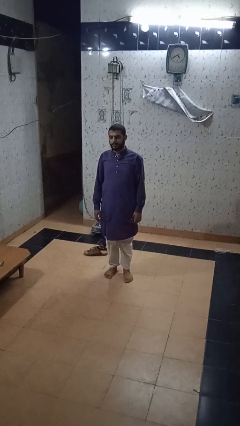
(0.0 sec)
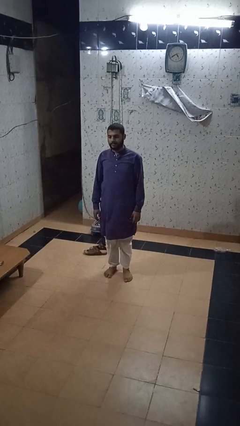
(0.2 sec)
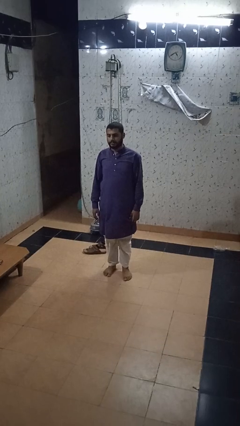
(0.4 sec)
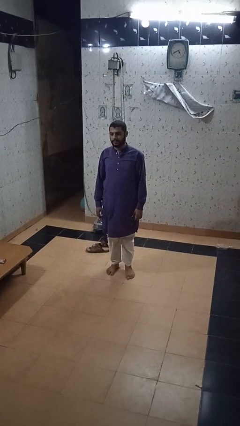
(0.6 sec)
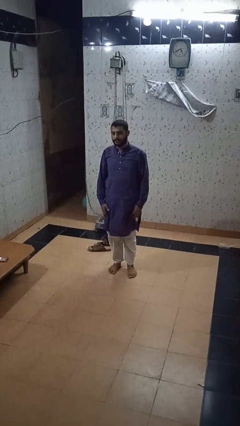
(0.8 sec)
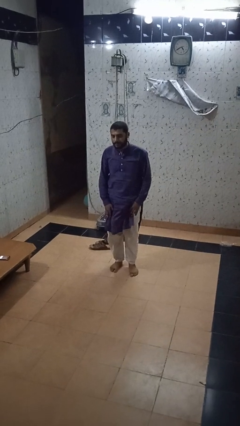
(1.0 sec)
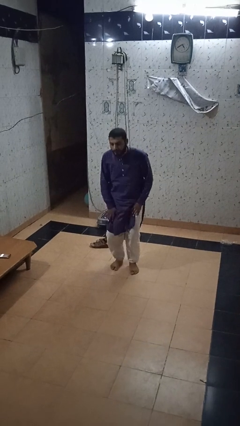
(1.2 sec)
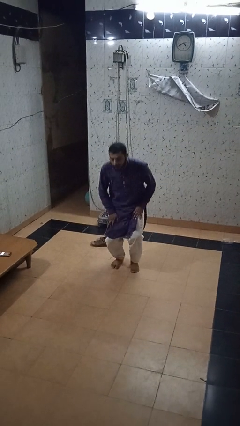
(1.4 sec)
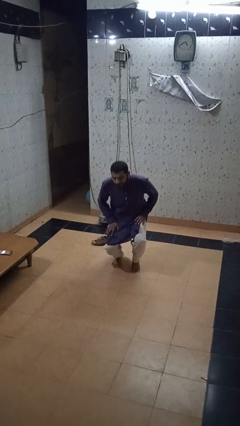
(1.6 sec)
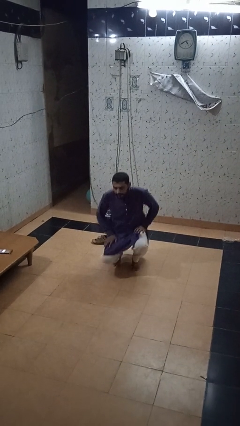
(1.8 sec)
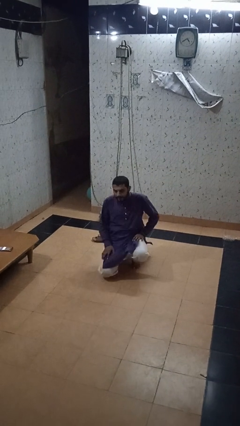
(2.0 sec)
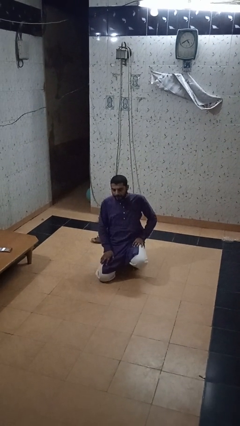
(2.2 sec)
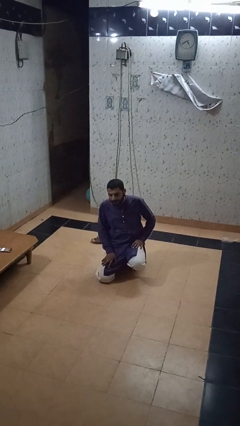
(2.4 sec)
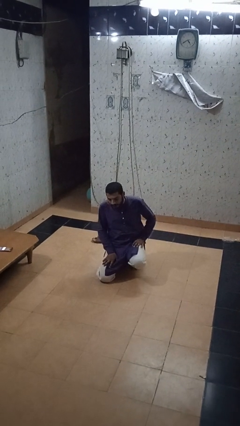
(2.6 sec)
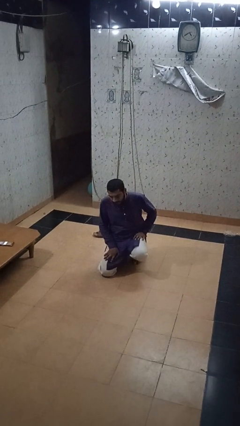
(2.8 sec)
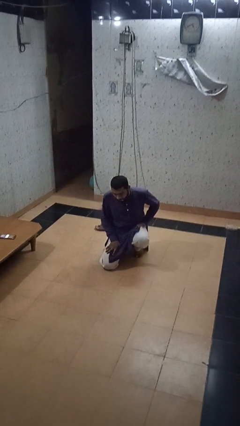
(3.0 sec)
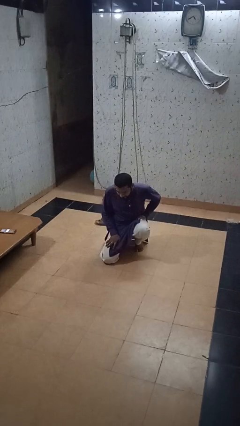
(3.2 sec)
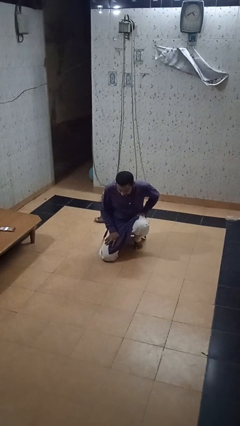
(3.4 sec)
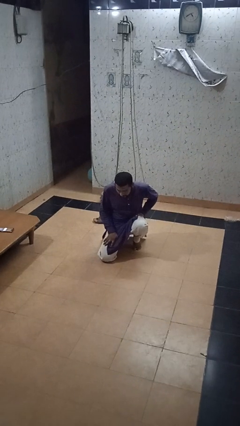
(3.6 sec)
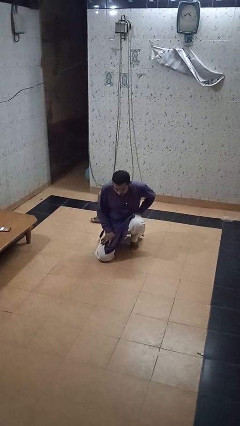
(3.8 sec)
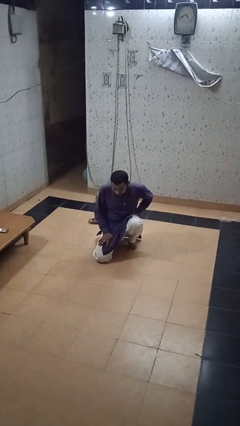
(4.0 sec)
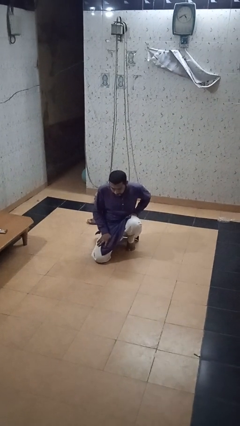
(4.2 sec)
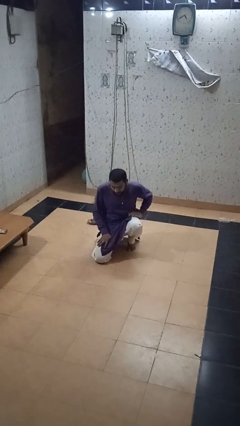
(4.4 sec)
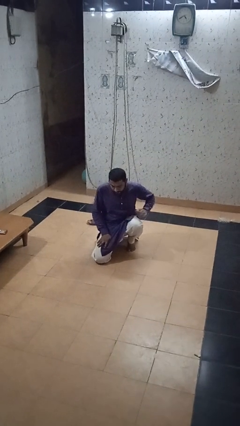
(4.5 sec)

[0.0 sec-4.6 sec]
person kneels

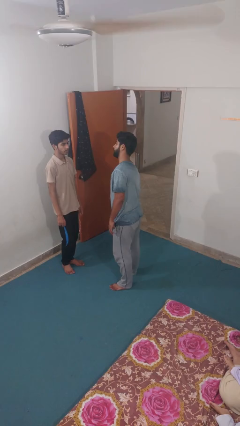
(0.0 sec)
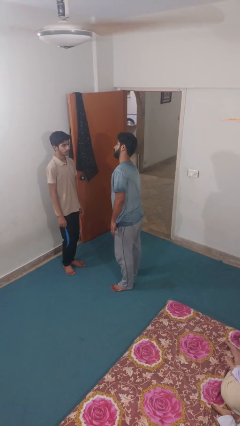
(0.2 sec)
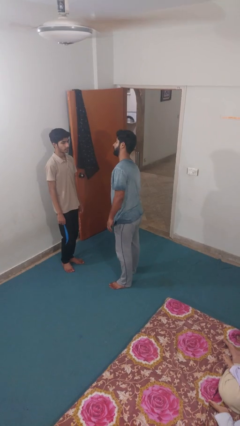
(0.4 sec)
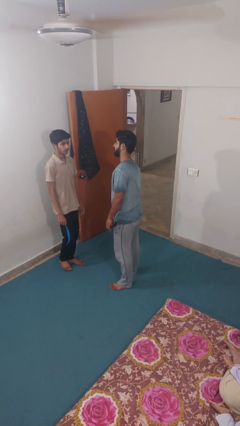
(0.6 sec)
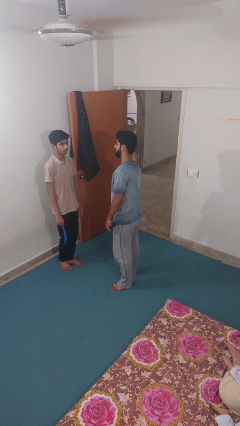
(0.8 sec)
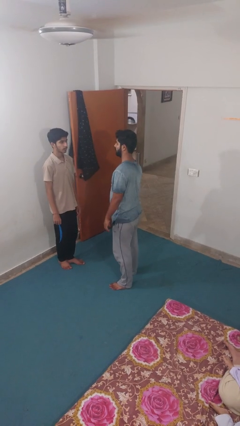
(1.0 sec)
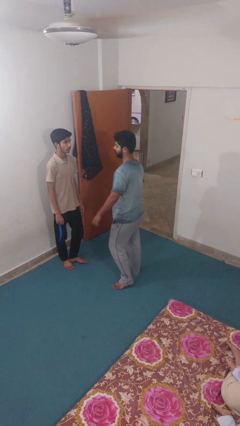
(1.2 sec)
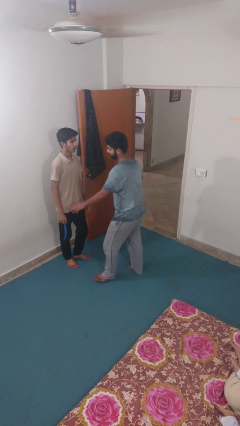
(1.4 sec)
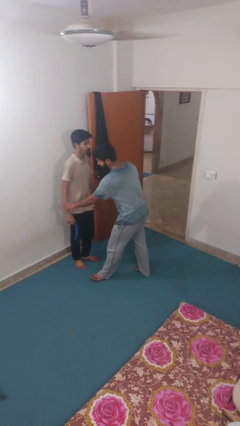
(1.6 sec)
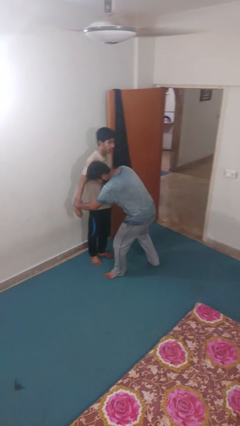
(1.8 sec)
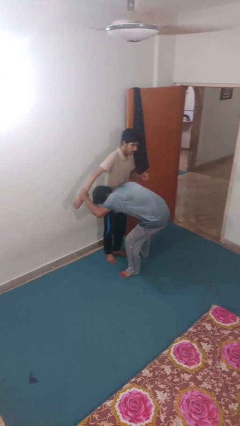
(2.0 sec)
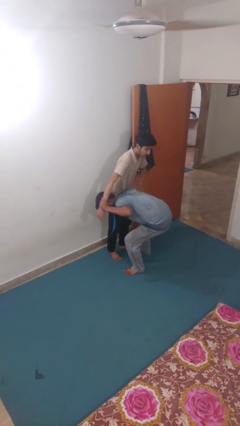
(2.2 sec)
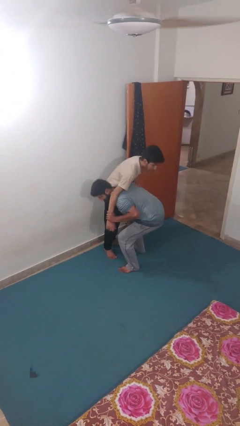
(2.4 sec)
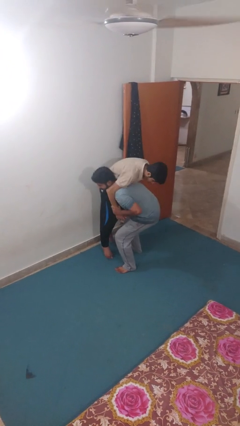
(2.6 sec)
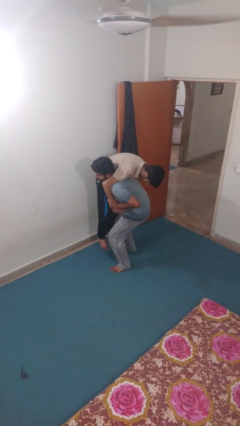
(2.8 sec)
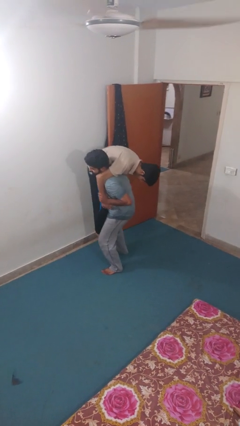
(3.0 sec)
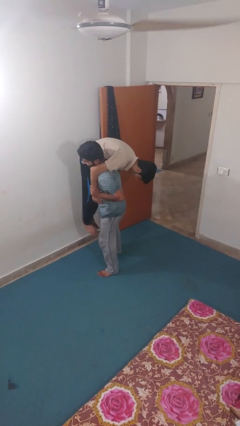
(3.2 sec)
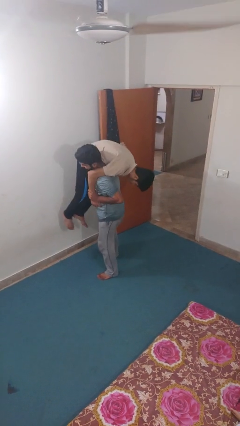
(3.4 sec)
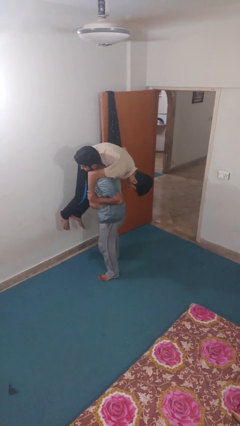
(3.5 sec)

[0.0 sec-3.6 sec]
person carries person over shoulder

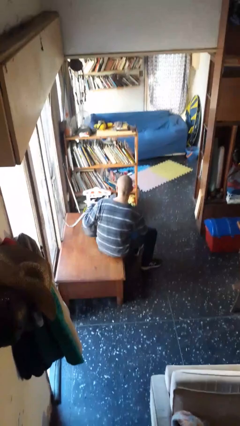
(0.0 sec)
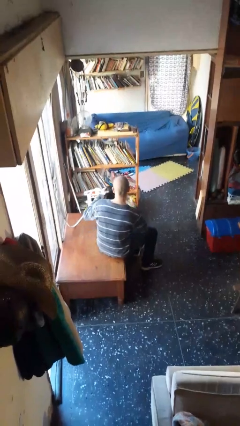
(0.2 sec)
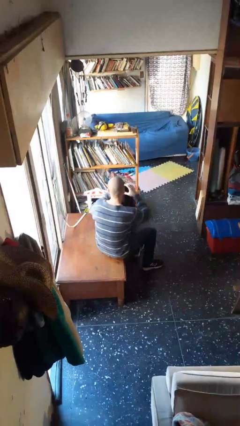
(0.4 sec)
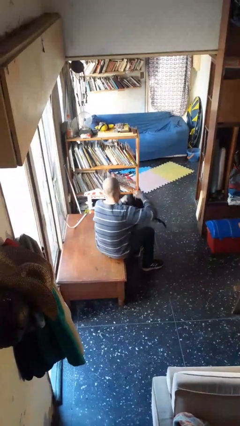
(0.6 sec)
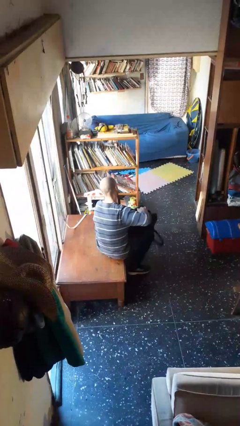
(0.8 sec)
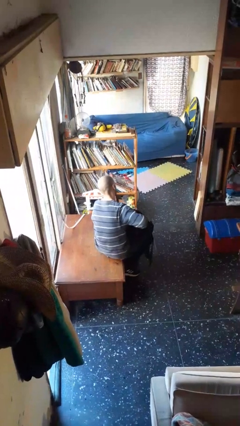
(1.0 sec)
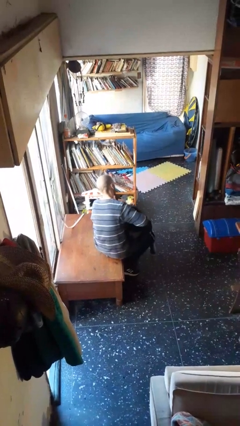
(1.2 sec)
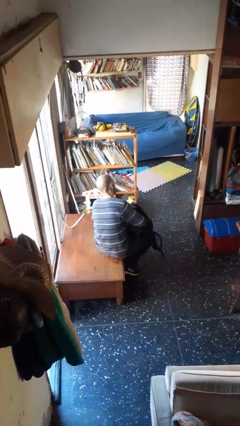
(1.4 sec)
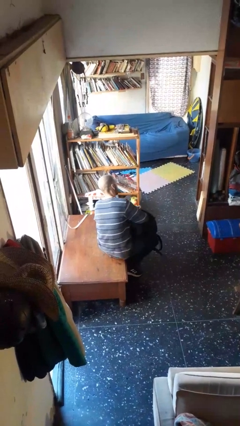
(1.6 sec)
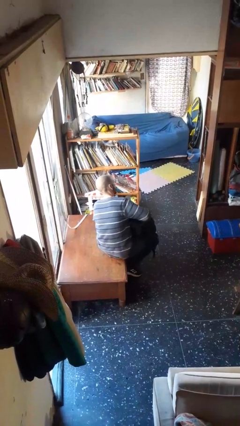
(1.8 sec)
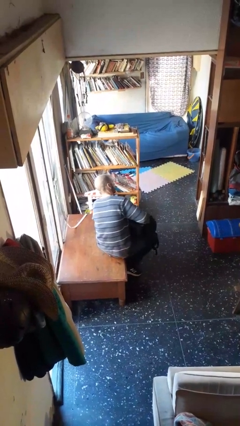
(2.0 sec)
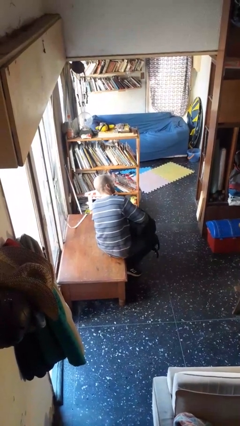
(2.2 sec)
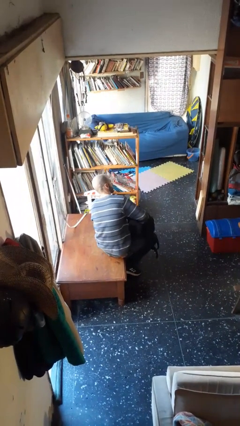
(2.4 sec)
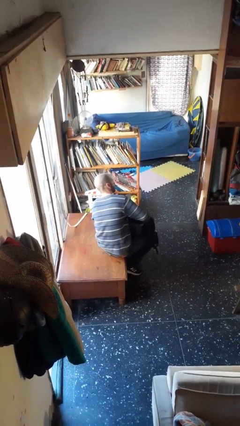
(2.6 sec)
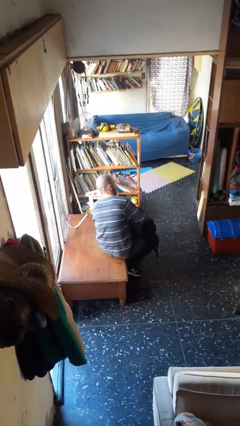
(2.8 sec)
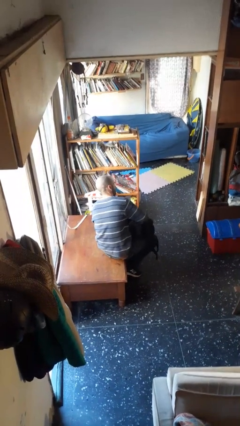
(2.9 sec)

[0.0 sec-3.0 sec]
person searches in backpack

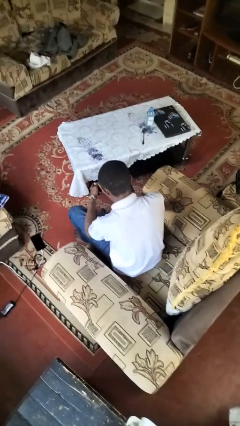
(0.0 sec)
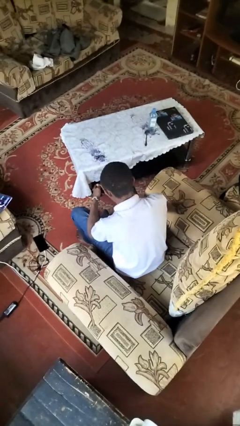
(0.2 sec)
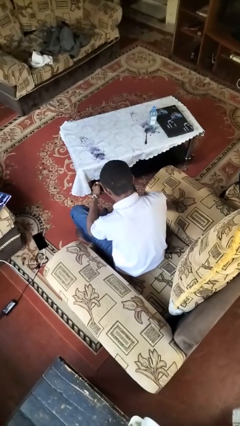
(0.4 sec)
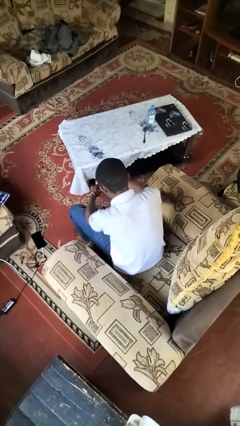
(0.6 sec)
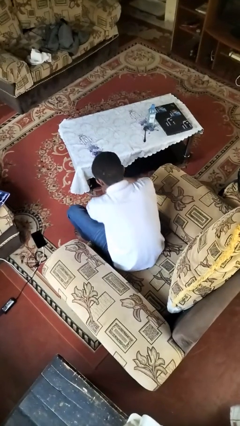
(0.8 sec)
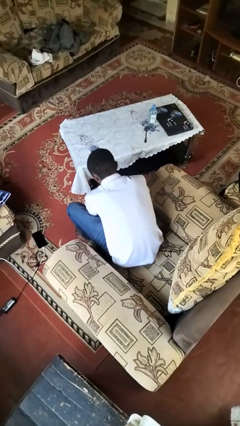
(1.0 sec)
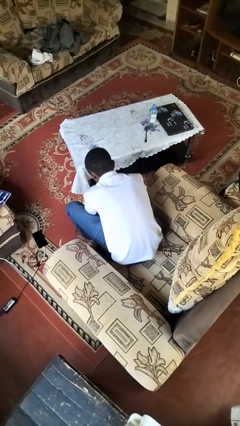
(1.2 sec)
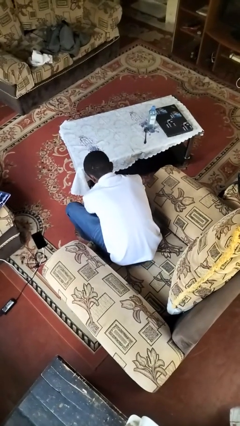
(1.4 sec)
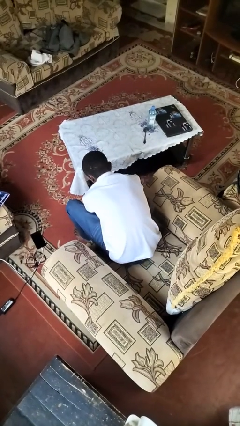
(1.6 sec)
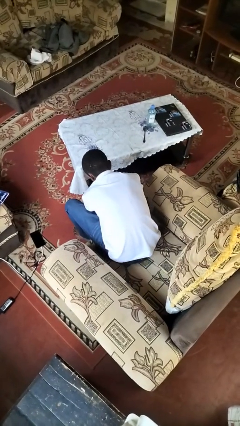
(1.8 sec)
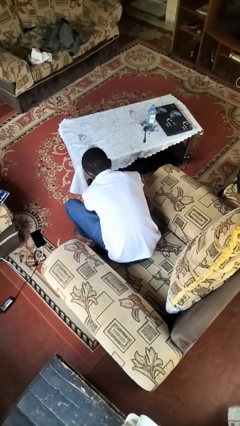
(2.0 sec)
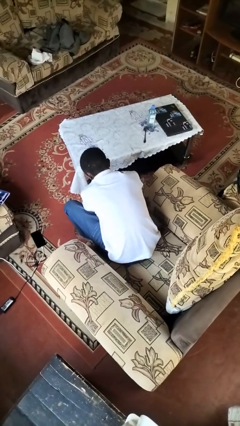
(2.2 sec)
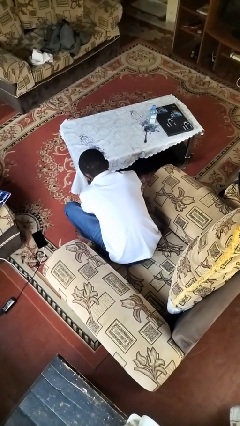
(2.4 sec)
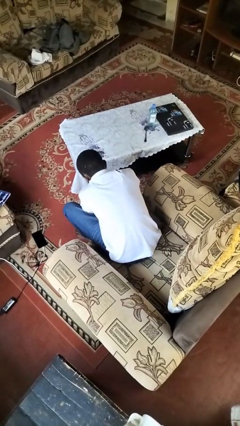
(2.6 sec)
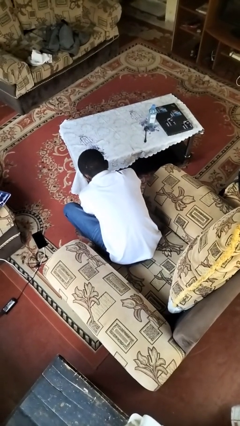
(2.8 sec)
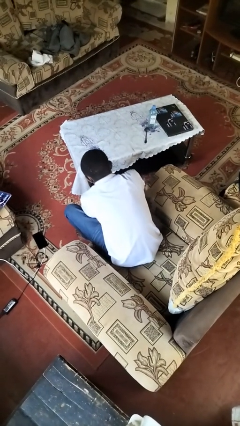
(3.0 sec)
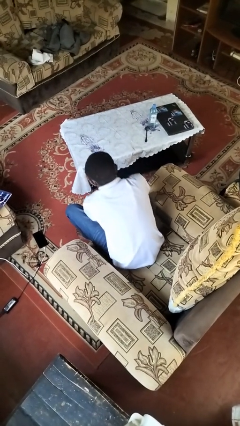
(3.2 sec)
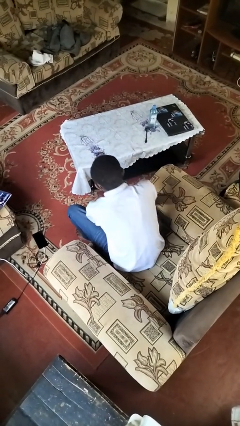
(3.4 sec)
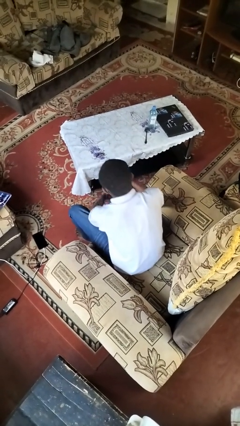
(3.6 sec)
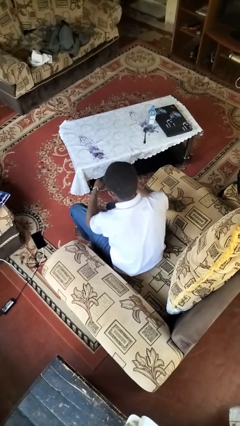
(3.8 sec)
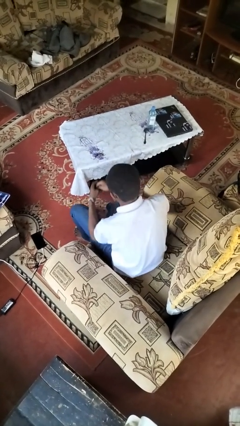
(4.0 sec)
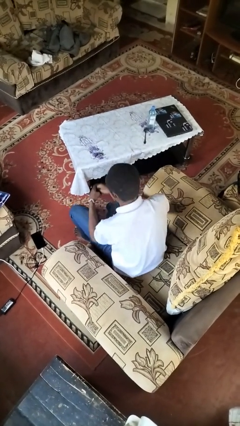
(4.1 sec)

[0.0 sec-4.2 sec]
person puts on socks

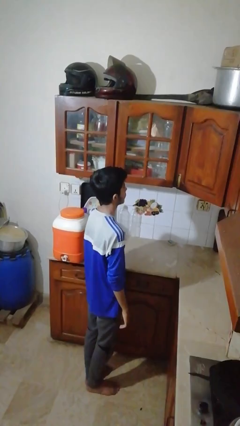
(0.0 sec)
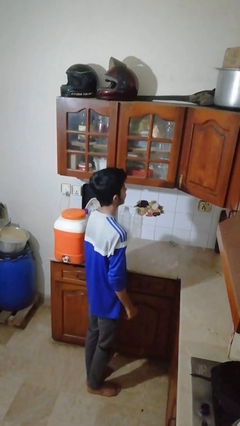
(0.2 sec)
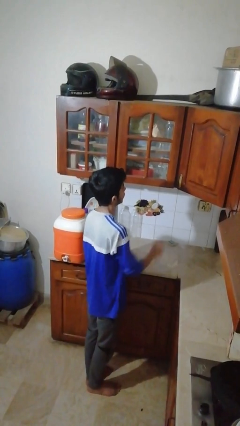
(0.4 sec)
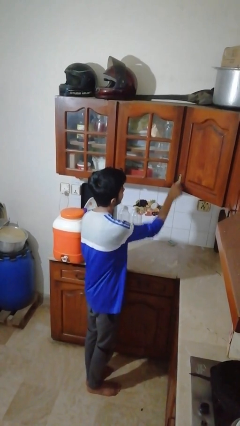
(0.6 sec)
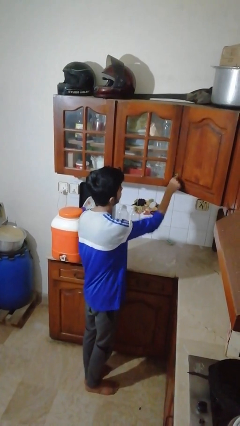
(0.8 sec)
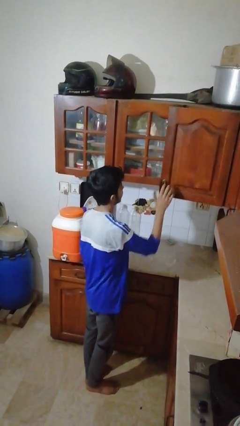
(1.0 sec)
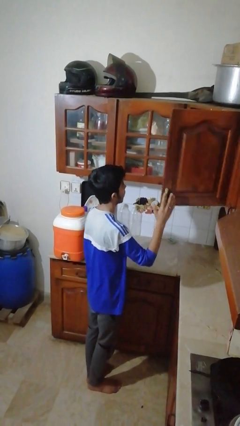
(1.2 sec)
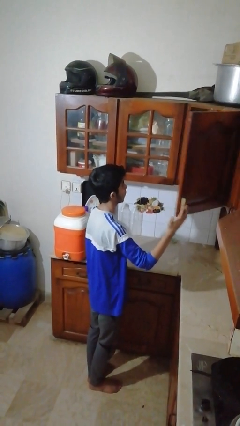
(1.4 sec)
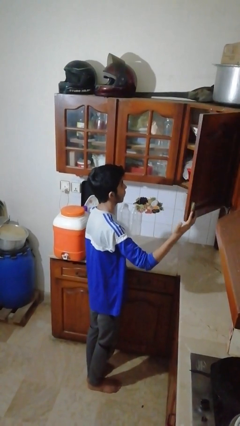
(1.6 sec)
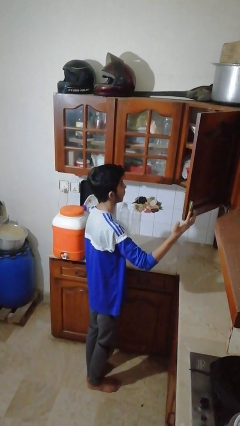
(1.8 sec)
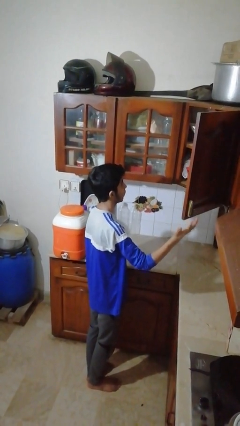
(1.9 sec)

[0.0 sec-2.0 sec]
person opens cabinet
